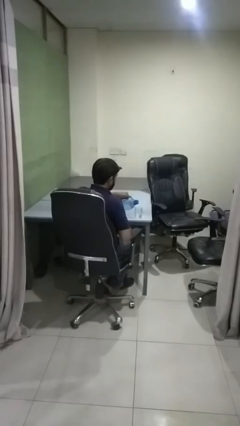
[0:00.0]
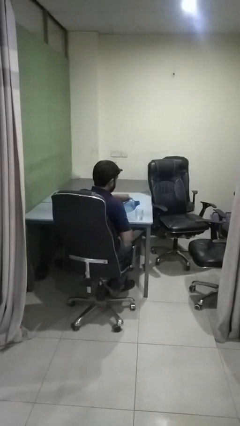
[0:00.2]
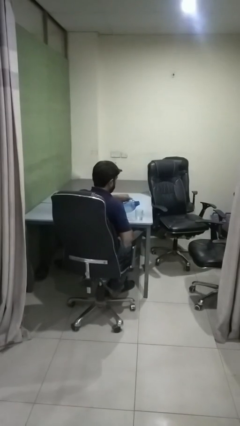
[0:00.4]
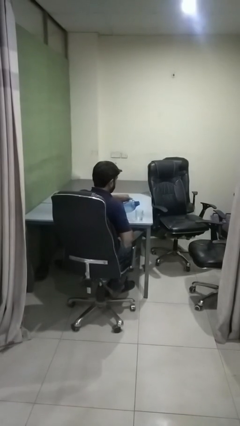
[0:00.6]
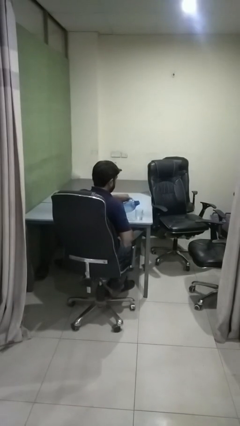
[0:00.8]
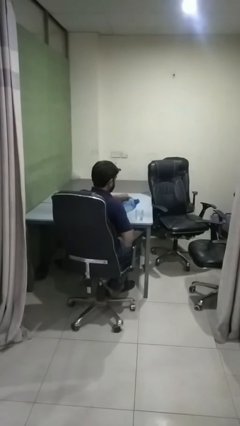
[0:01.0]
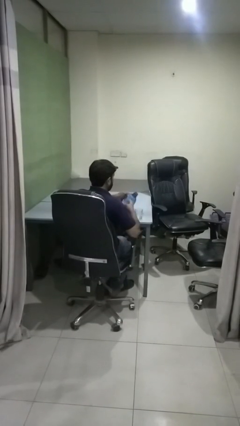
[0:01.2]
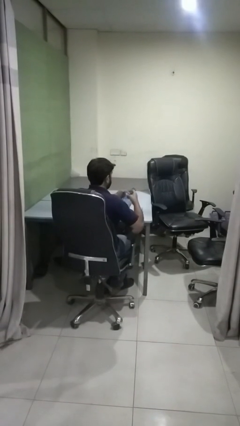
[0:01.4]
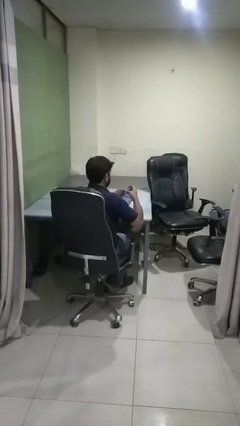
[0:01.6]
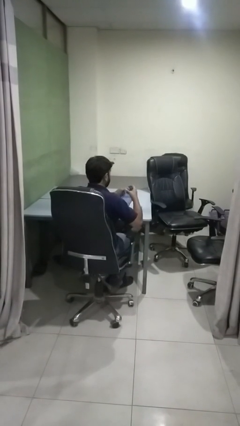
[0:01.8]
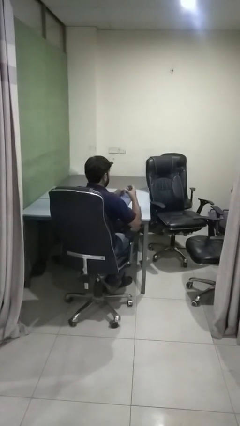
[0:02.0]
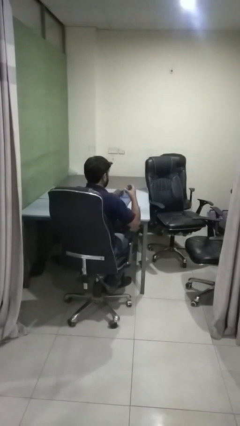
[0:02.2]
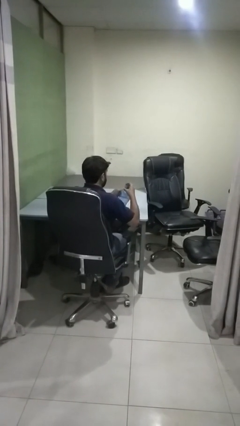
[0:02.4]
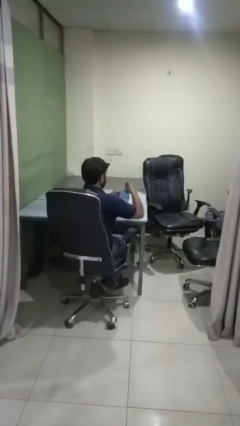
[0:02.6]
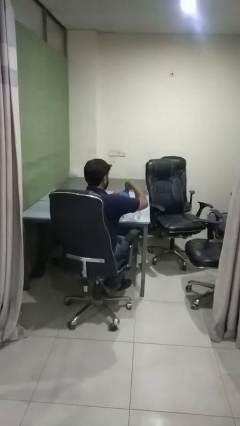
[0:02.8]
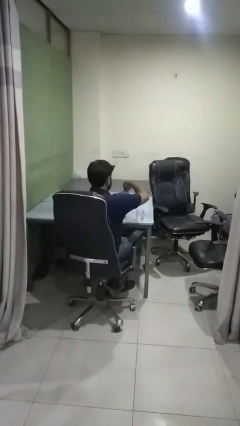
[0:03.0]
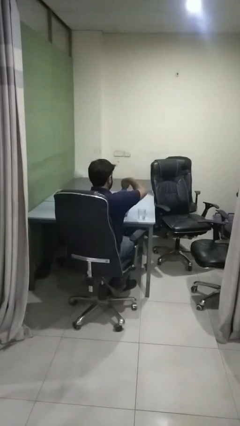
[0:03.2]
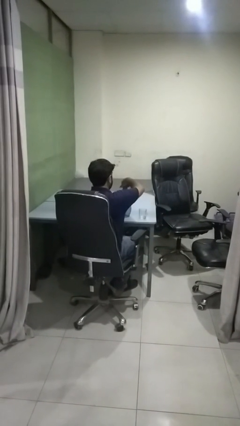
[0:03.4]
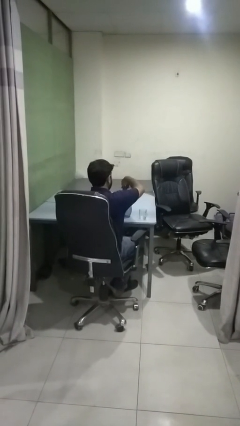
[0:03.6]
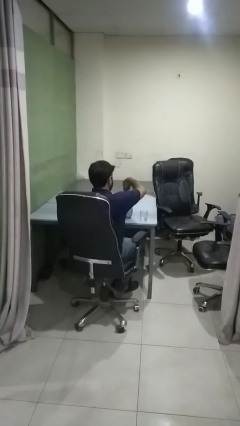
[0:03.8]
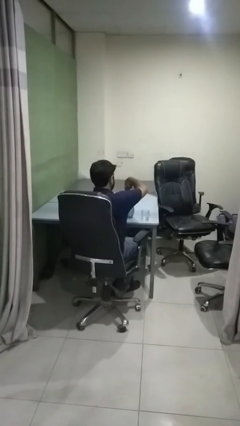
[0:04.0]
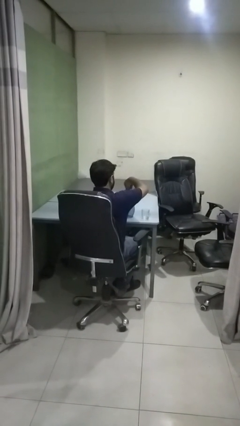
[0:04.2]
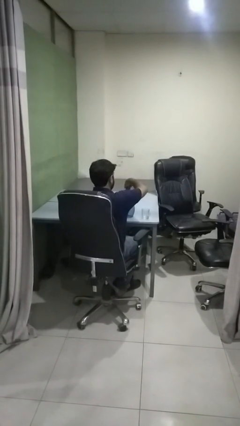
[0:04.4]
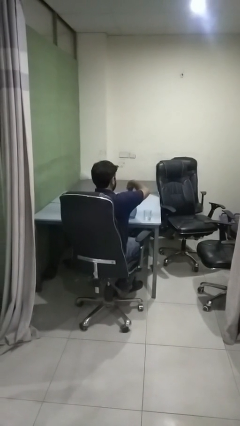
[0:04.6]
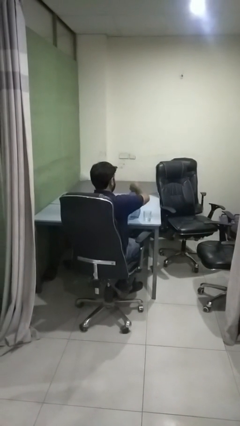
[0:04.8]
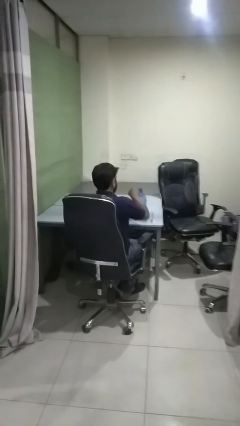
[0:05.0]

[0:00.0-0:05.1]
person screws lid to bottle

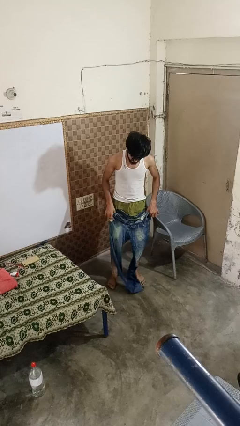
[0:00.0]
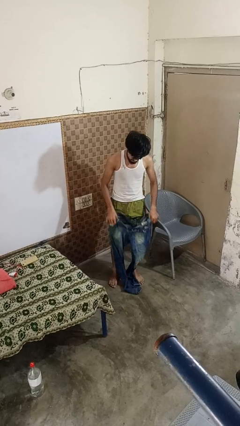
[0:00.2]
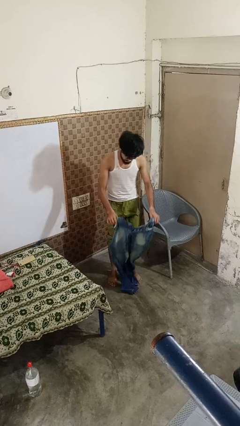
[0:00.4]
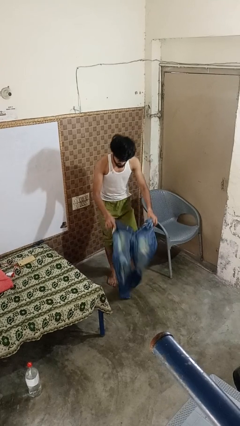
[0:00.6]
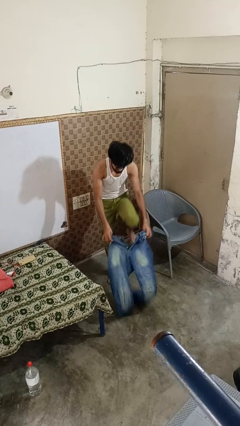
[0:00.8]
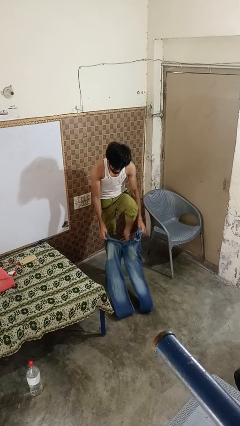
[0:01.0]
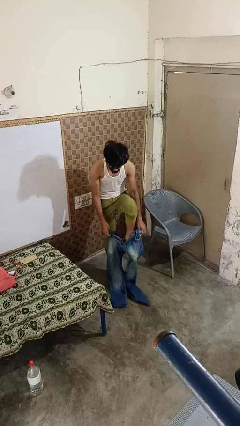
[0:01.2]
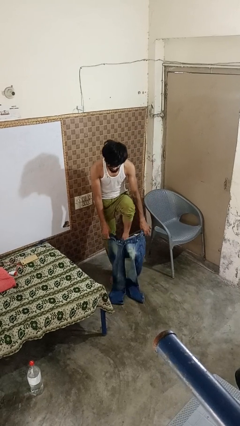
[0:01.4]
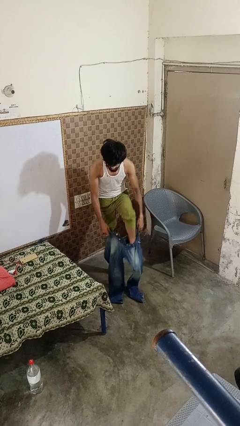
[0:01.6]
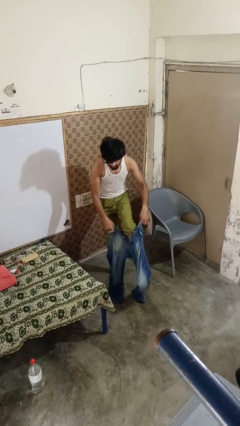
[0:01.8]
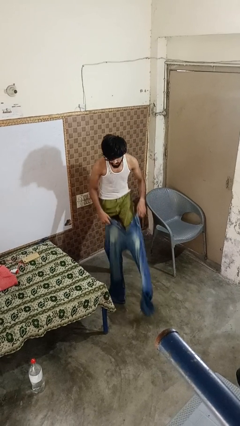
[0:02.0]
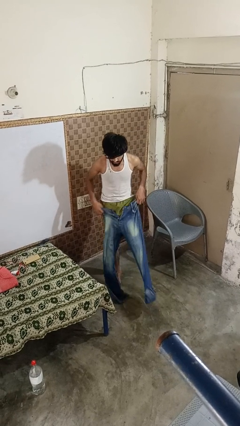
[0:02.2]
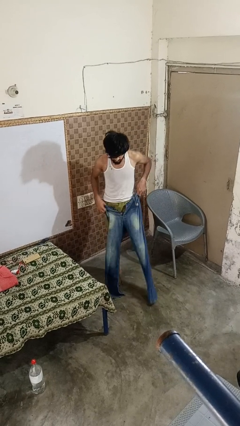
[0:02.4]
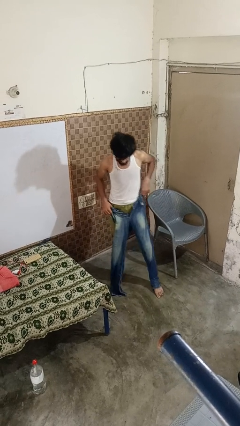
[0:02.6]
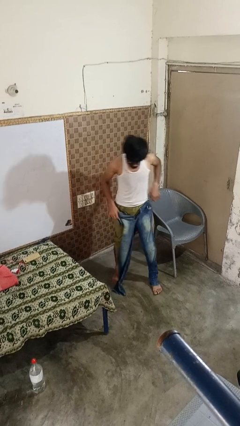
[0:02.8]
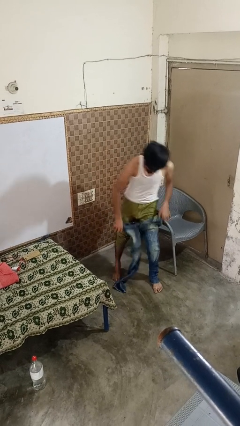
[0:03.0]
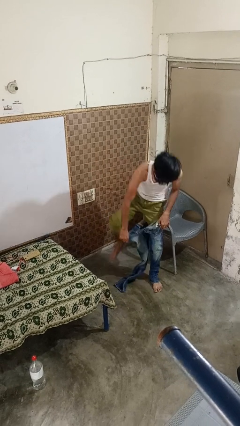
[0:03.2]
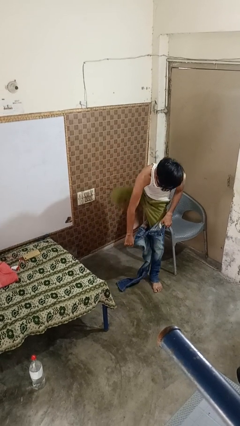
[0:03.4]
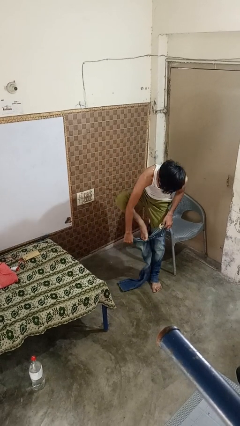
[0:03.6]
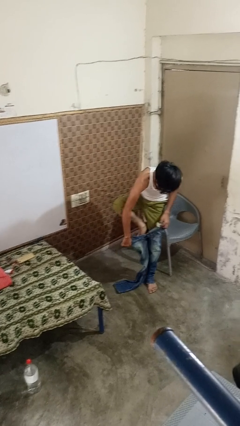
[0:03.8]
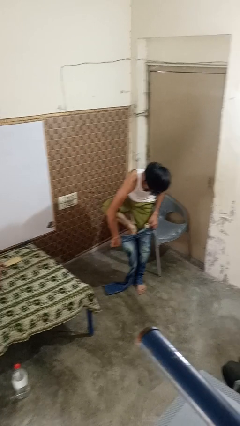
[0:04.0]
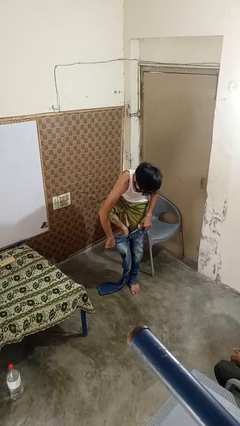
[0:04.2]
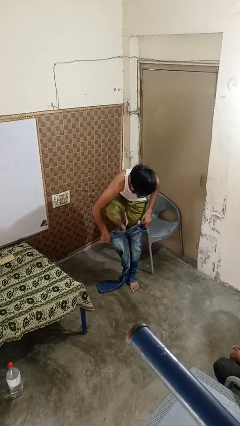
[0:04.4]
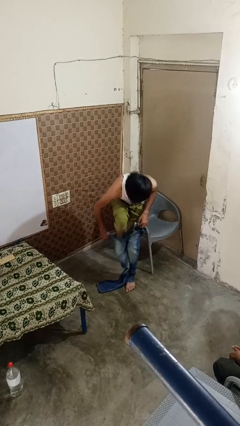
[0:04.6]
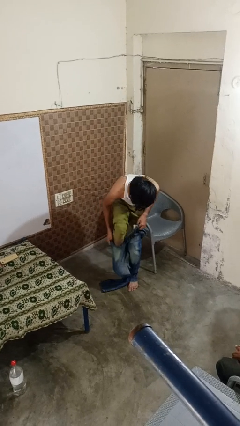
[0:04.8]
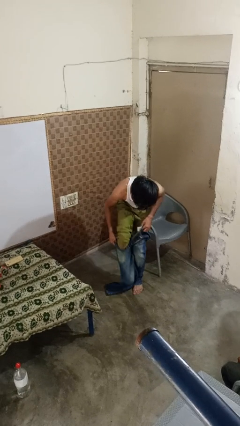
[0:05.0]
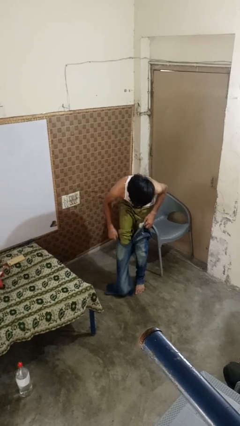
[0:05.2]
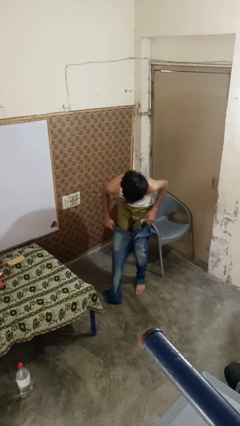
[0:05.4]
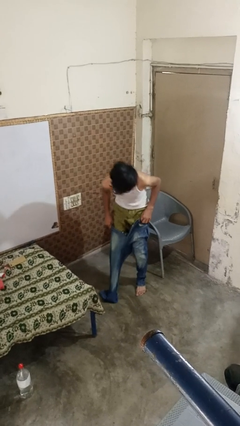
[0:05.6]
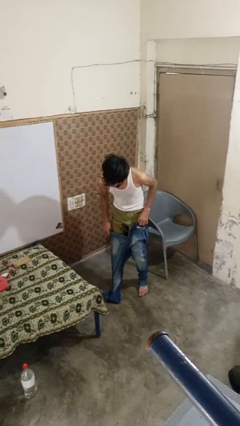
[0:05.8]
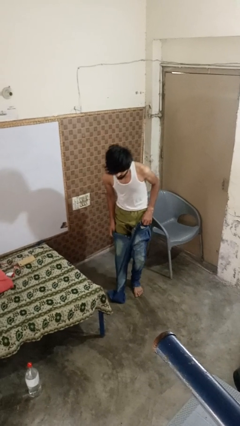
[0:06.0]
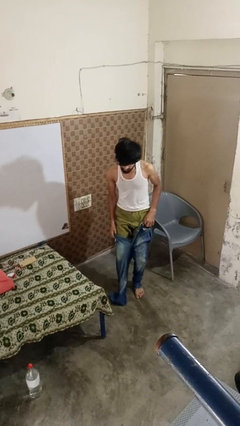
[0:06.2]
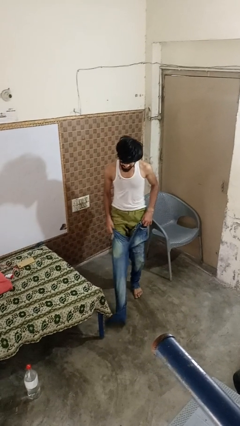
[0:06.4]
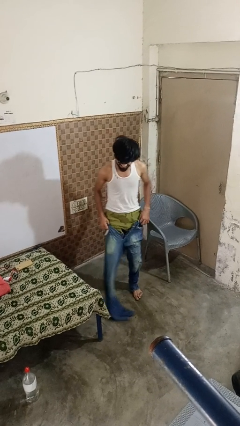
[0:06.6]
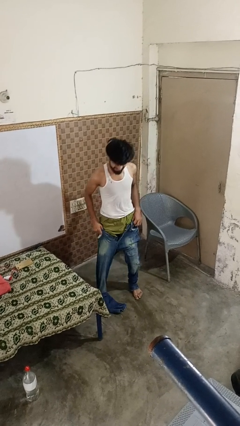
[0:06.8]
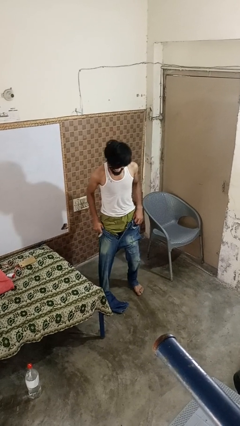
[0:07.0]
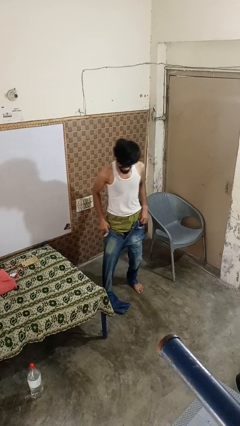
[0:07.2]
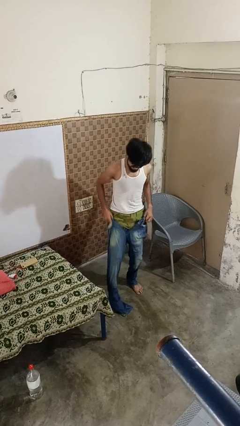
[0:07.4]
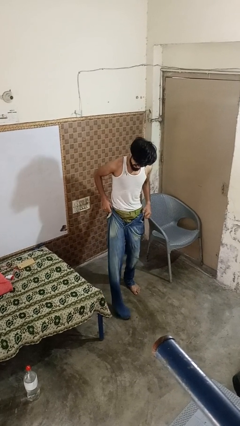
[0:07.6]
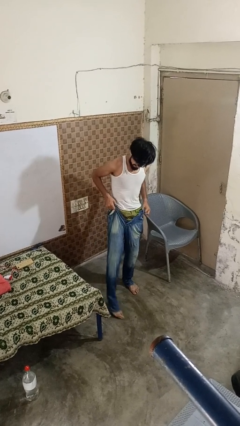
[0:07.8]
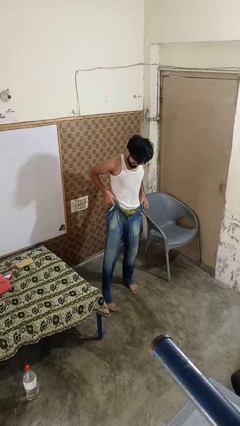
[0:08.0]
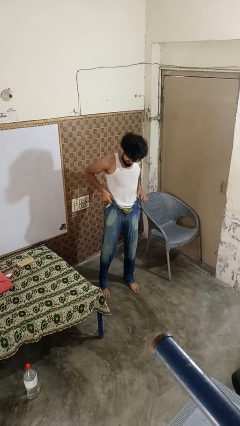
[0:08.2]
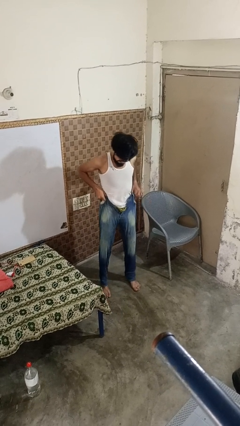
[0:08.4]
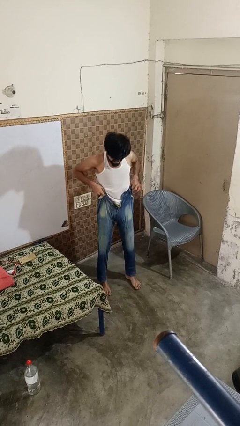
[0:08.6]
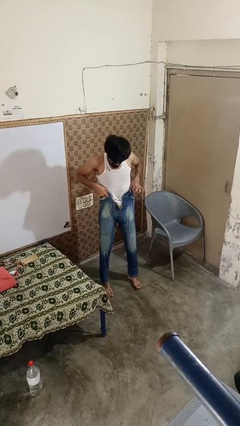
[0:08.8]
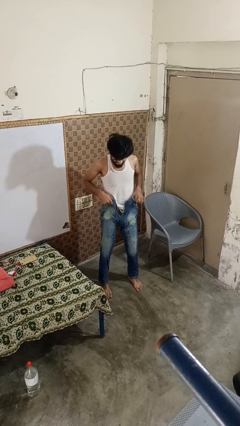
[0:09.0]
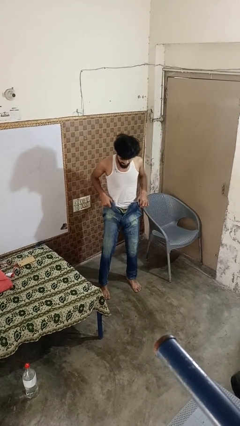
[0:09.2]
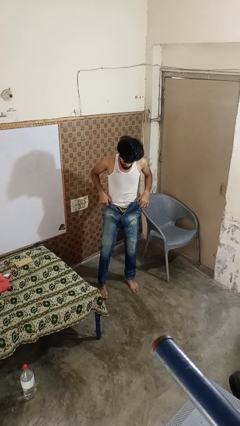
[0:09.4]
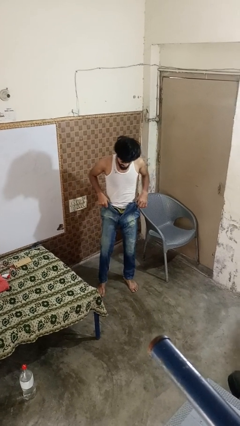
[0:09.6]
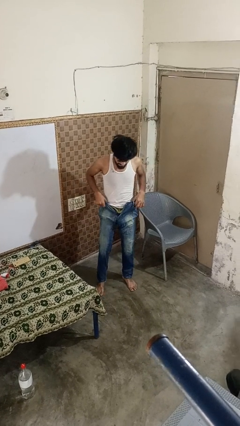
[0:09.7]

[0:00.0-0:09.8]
person puts on pants

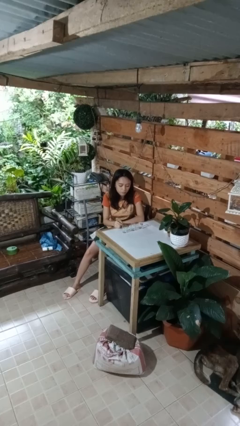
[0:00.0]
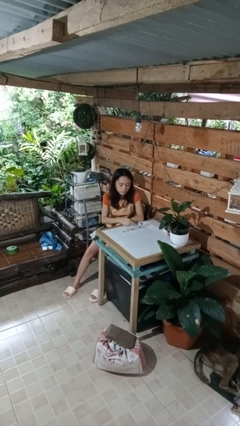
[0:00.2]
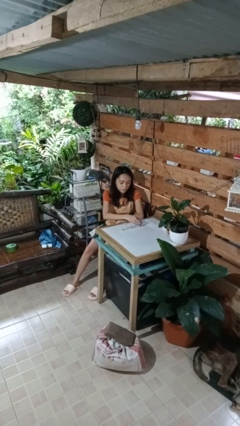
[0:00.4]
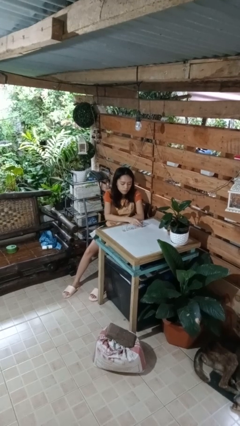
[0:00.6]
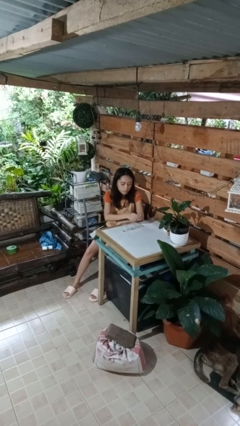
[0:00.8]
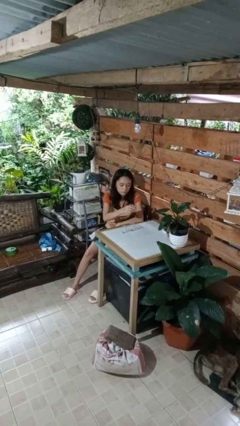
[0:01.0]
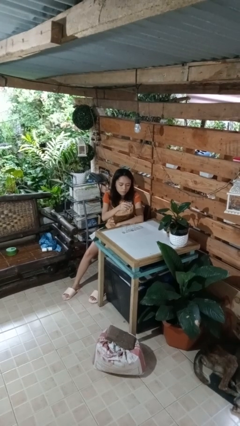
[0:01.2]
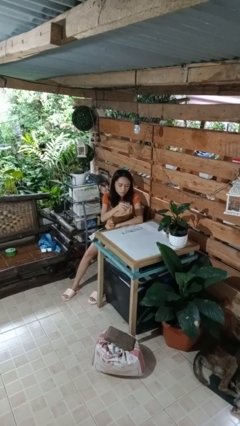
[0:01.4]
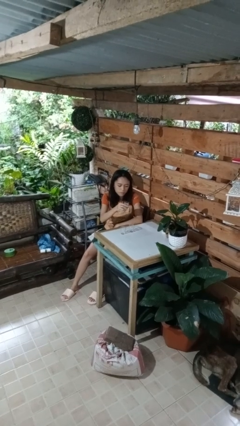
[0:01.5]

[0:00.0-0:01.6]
person picks up object from table

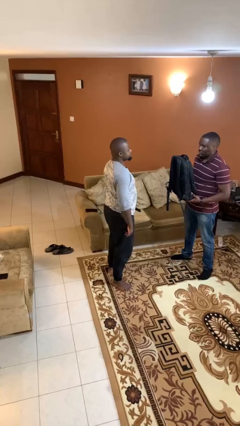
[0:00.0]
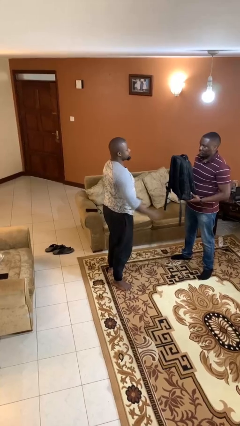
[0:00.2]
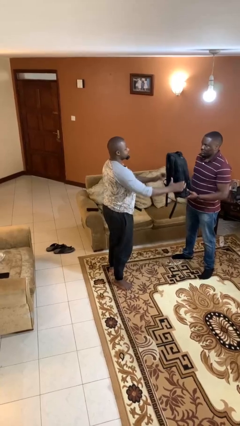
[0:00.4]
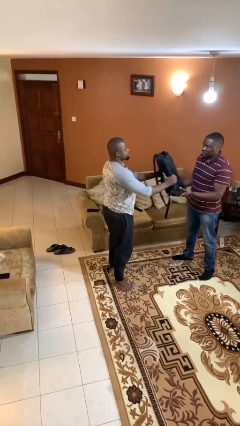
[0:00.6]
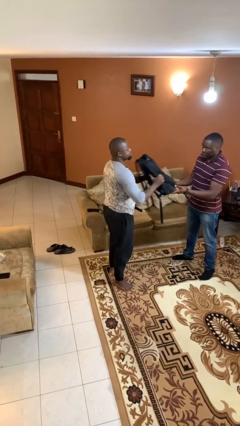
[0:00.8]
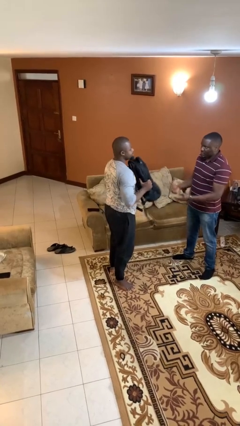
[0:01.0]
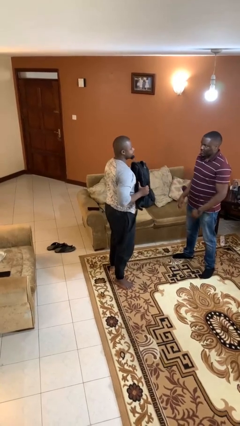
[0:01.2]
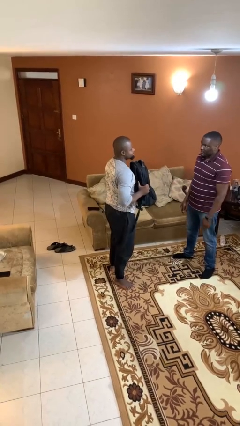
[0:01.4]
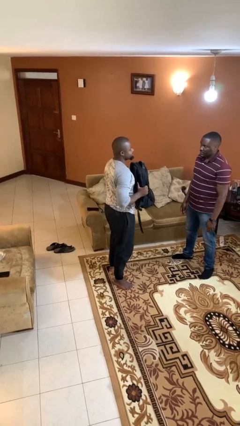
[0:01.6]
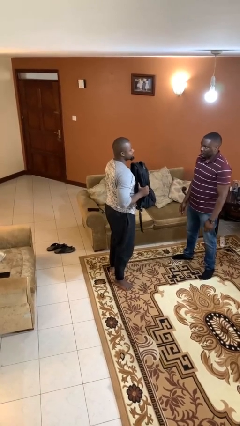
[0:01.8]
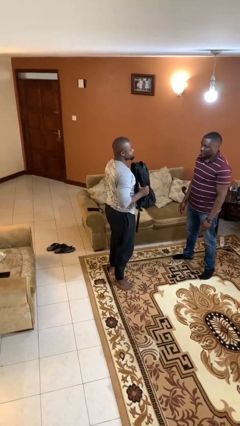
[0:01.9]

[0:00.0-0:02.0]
person transfers object to person
